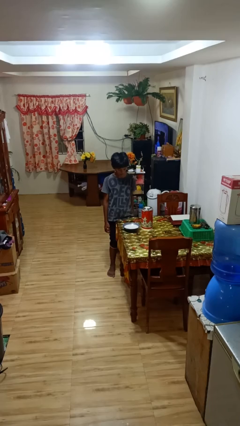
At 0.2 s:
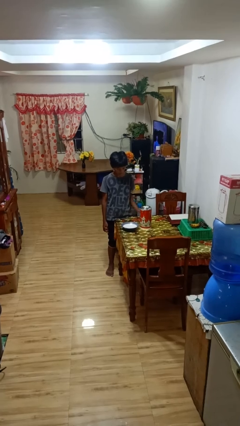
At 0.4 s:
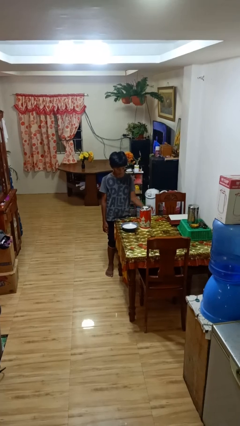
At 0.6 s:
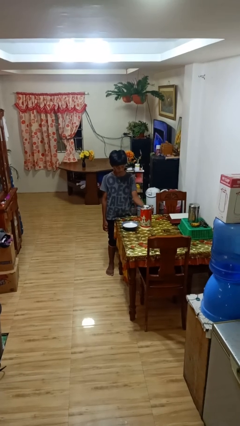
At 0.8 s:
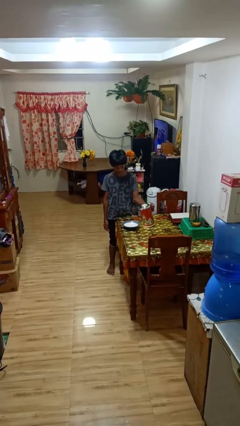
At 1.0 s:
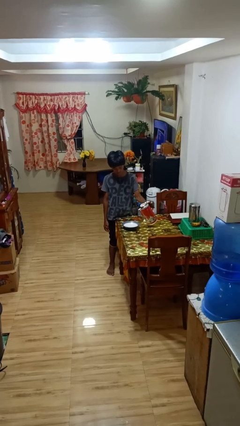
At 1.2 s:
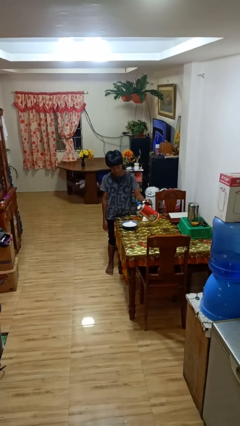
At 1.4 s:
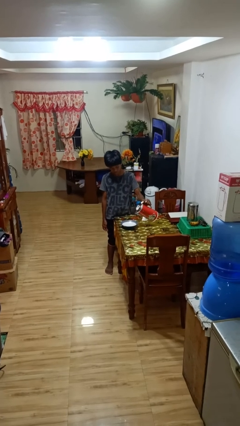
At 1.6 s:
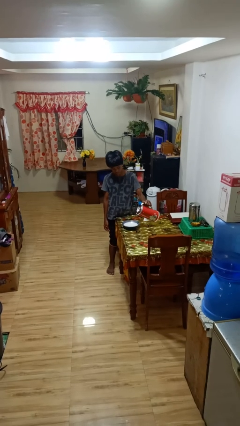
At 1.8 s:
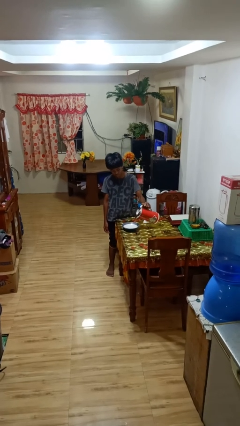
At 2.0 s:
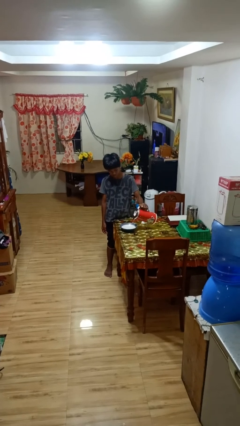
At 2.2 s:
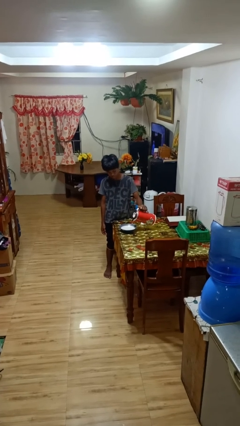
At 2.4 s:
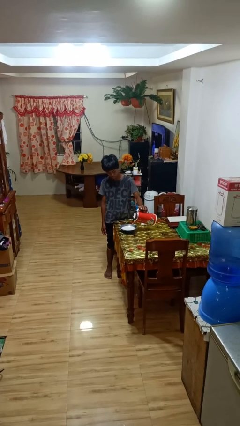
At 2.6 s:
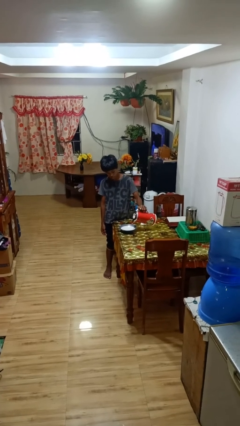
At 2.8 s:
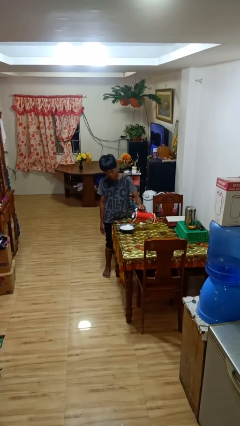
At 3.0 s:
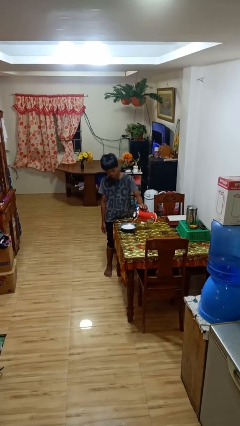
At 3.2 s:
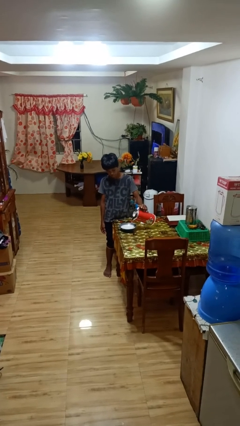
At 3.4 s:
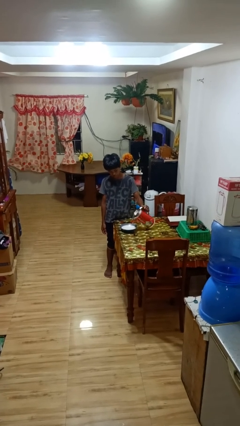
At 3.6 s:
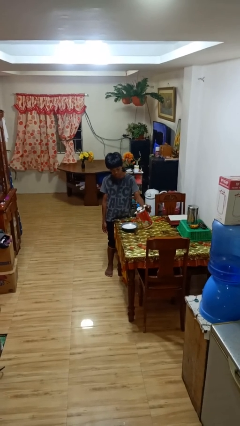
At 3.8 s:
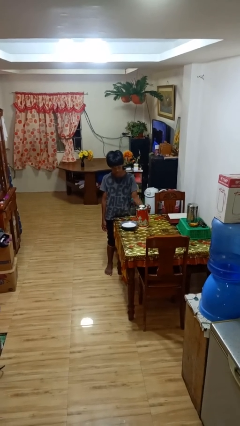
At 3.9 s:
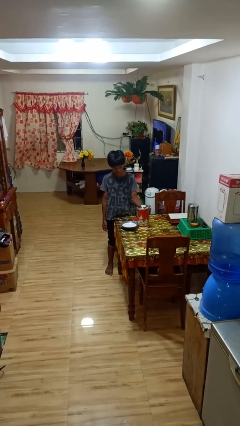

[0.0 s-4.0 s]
person pours into bowl

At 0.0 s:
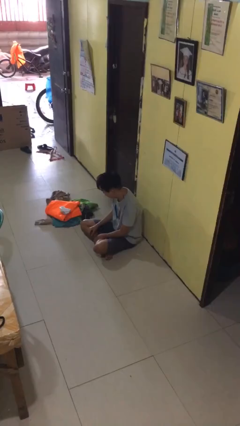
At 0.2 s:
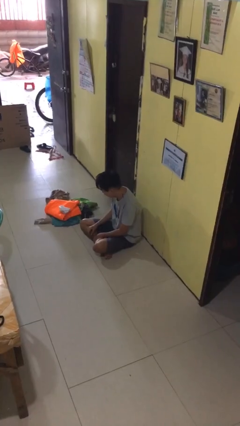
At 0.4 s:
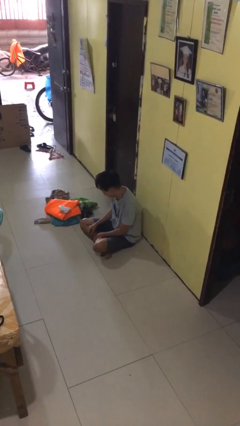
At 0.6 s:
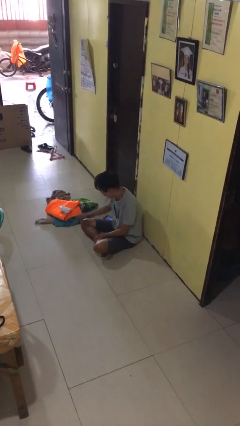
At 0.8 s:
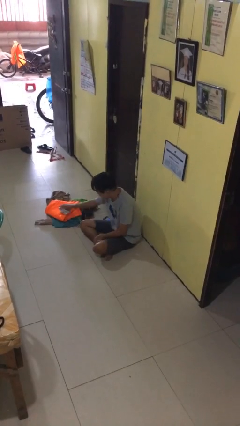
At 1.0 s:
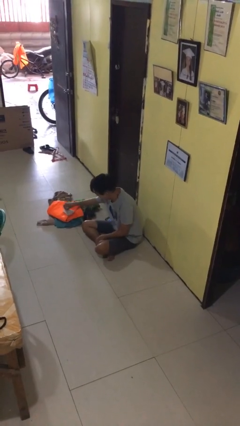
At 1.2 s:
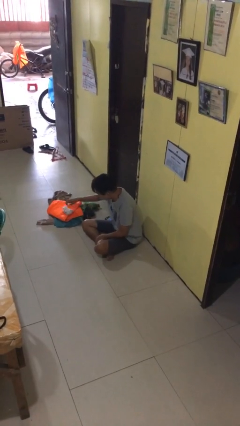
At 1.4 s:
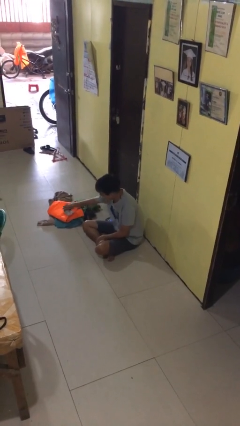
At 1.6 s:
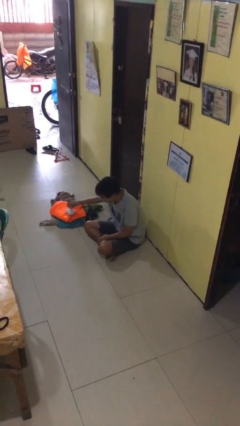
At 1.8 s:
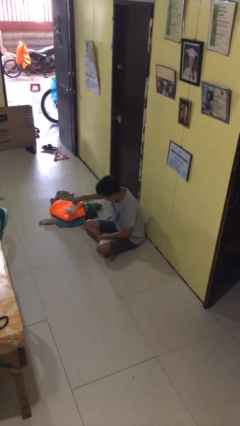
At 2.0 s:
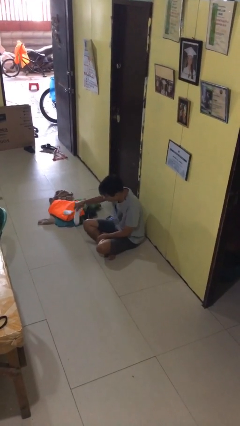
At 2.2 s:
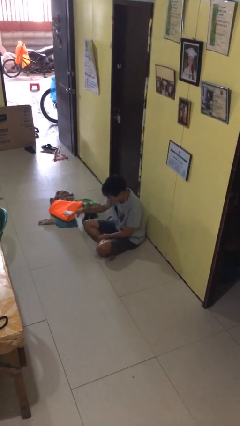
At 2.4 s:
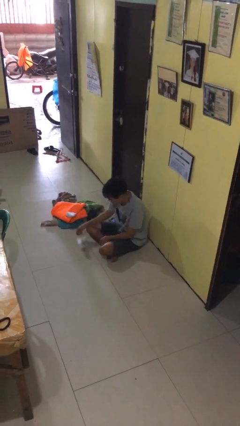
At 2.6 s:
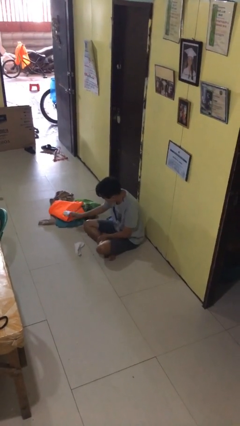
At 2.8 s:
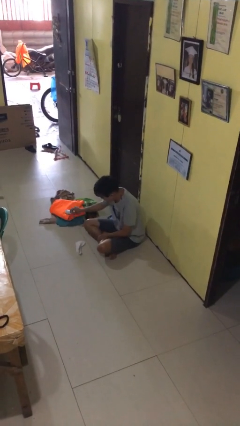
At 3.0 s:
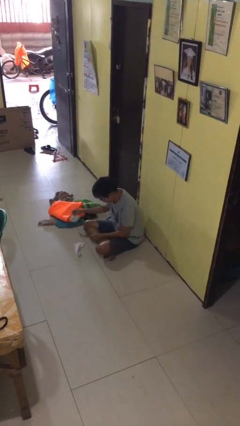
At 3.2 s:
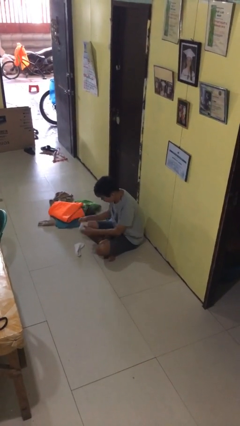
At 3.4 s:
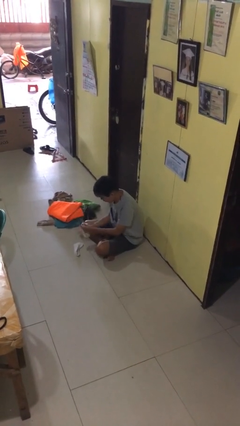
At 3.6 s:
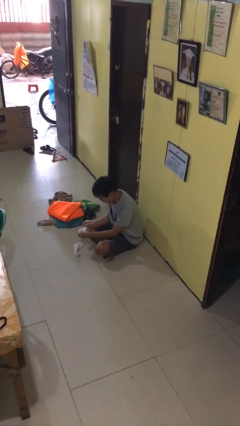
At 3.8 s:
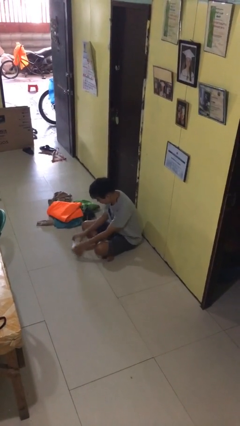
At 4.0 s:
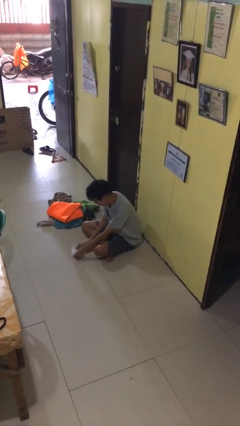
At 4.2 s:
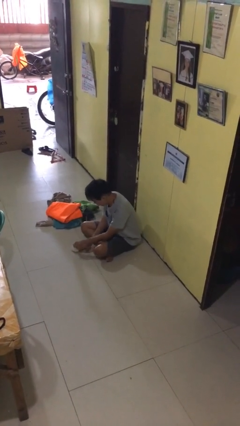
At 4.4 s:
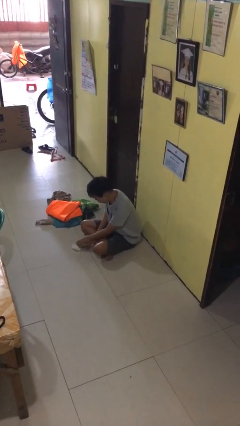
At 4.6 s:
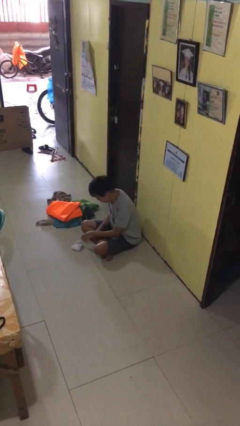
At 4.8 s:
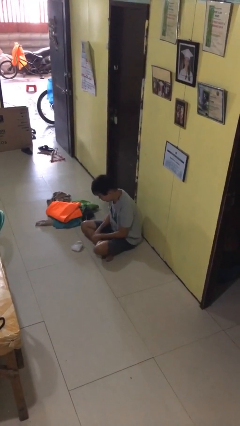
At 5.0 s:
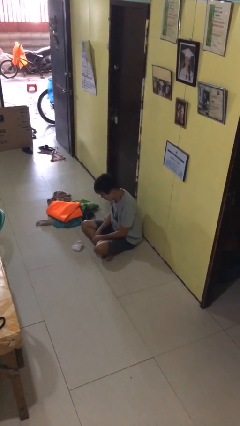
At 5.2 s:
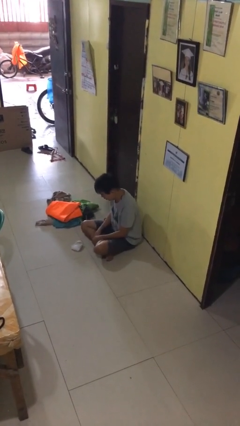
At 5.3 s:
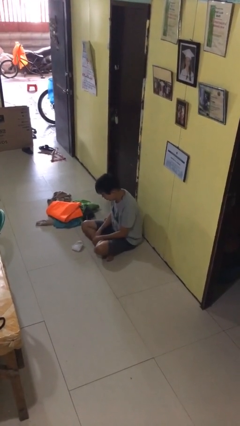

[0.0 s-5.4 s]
person folds socks

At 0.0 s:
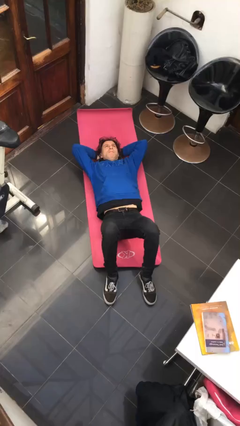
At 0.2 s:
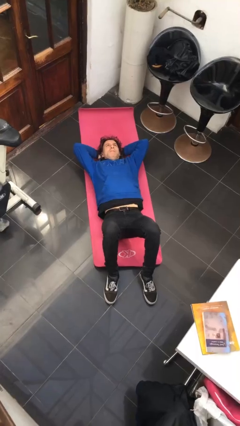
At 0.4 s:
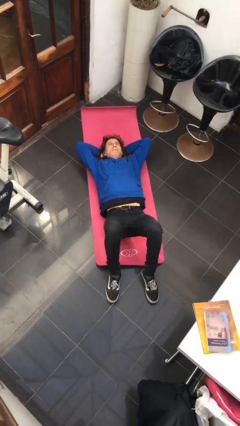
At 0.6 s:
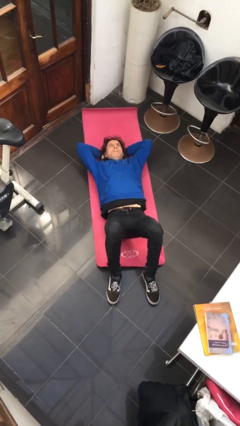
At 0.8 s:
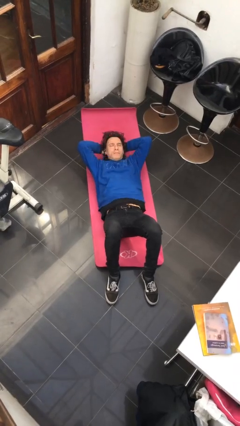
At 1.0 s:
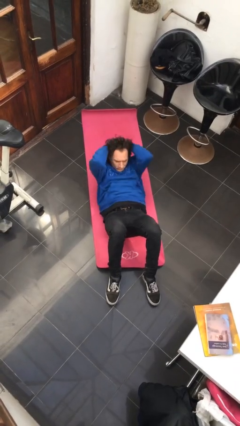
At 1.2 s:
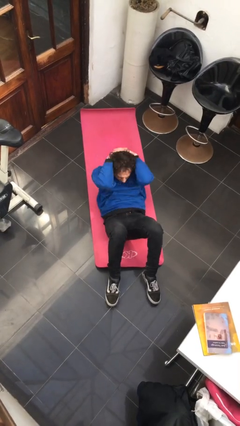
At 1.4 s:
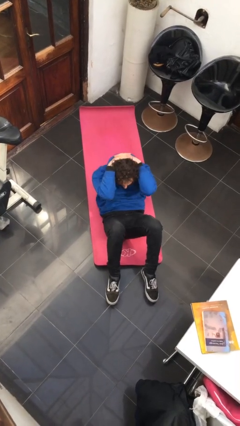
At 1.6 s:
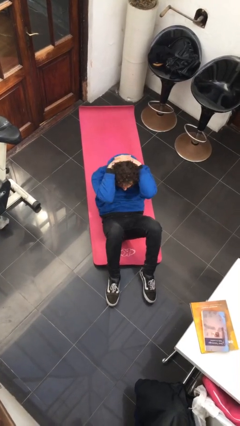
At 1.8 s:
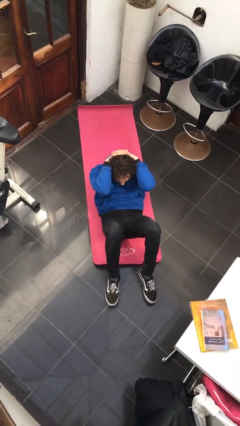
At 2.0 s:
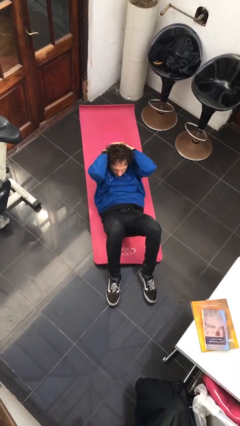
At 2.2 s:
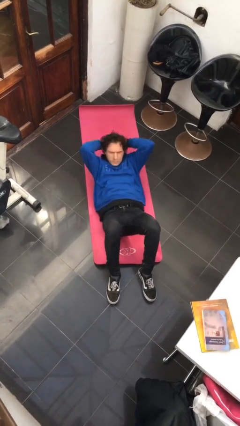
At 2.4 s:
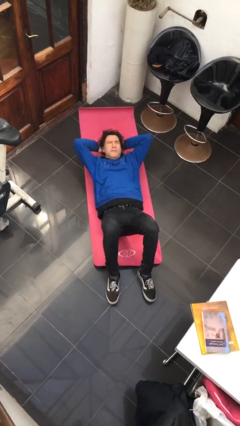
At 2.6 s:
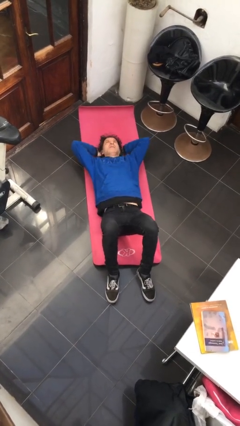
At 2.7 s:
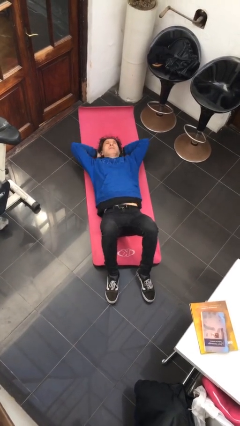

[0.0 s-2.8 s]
person exercises with situp

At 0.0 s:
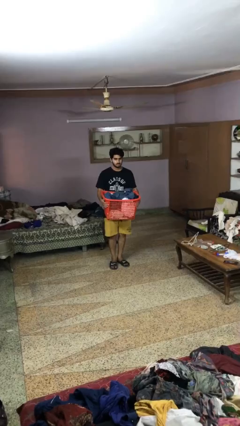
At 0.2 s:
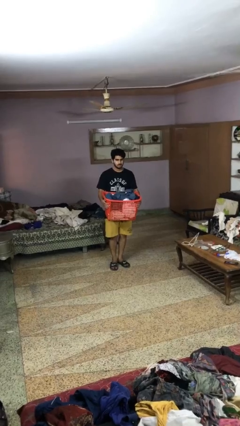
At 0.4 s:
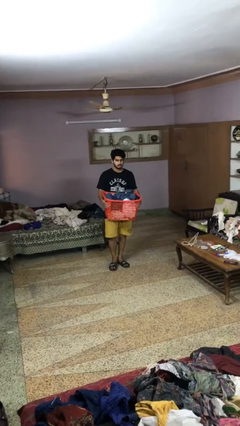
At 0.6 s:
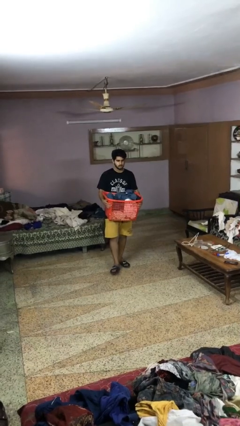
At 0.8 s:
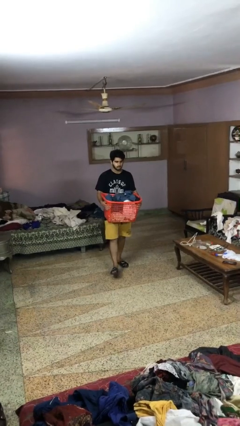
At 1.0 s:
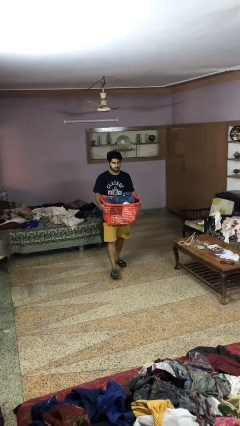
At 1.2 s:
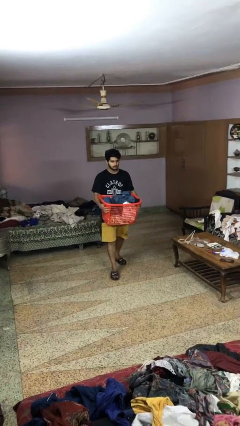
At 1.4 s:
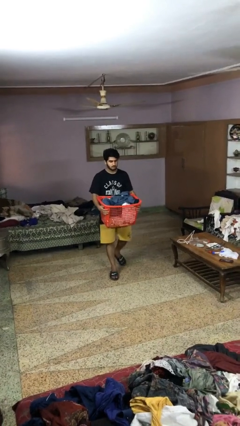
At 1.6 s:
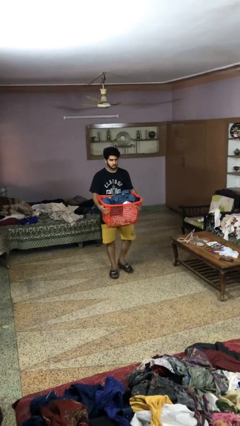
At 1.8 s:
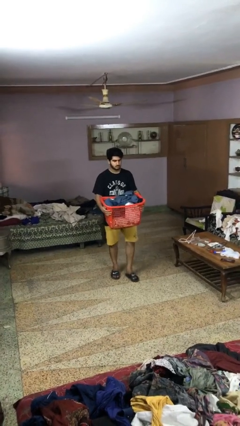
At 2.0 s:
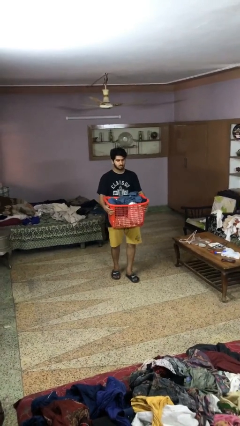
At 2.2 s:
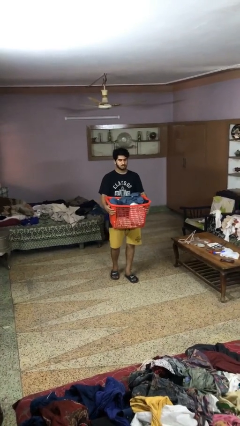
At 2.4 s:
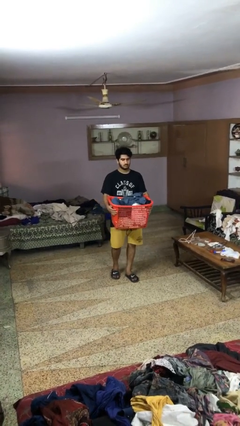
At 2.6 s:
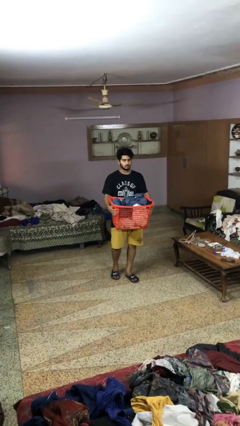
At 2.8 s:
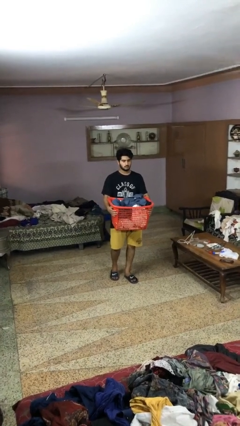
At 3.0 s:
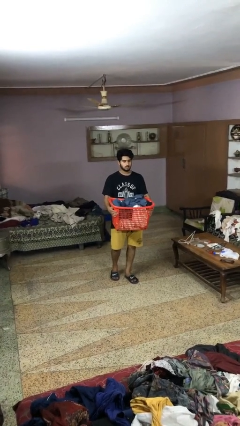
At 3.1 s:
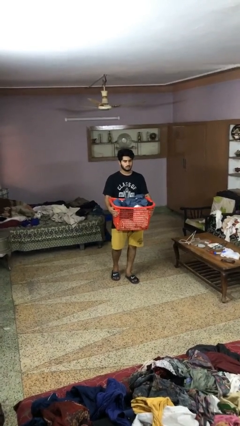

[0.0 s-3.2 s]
person carries laundry basket

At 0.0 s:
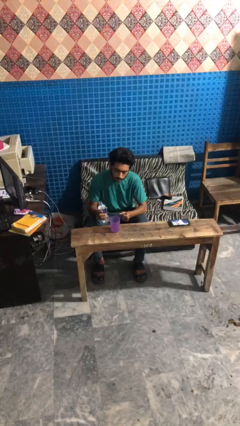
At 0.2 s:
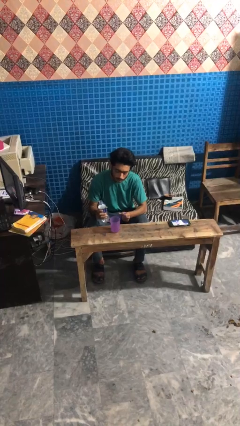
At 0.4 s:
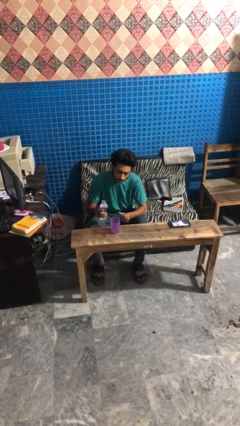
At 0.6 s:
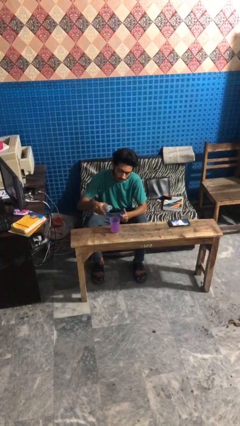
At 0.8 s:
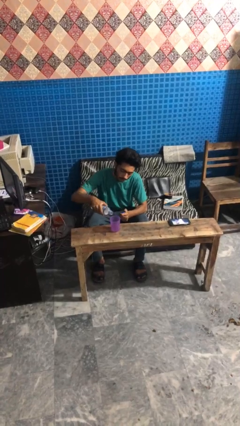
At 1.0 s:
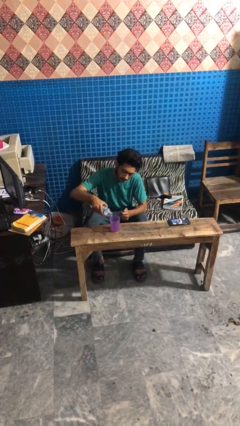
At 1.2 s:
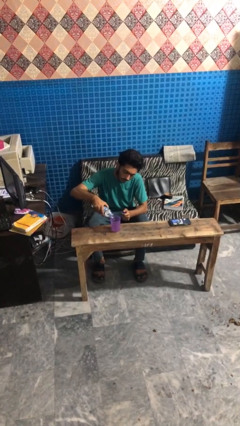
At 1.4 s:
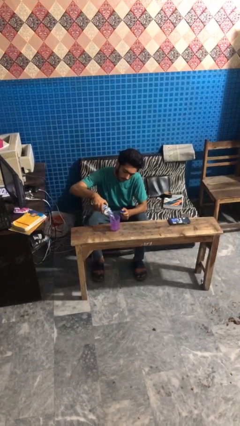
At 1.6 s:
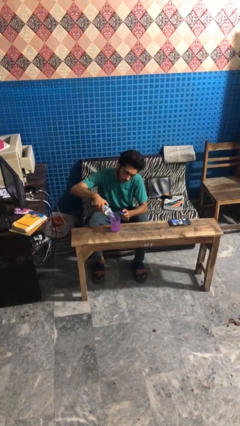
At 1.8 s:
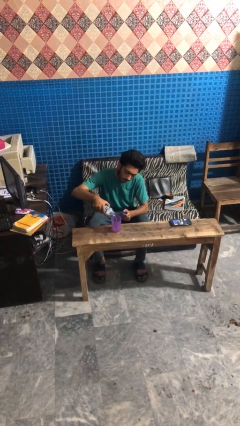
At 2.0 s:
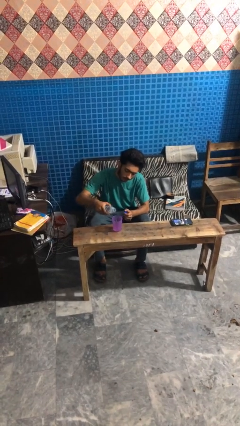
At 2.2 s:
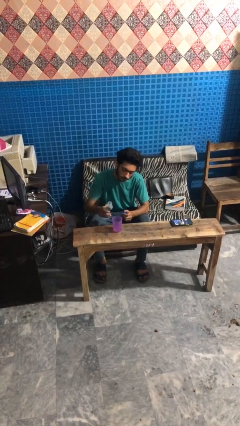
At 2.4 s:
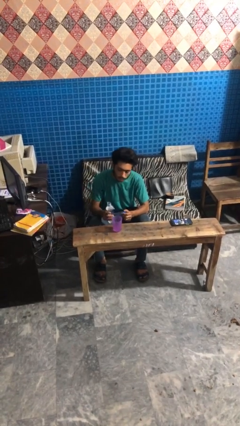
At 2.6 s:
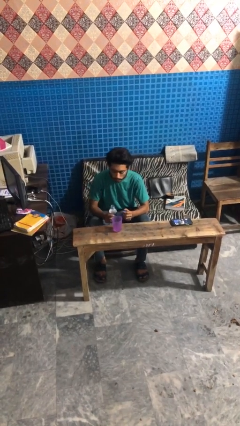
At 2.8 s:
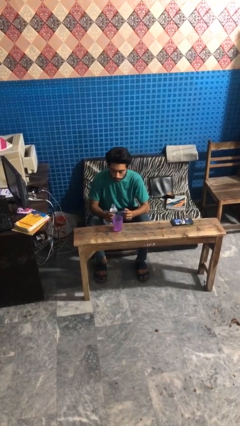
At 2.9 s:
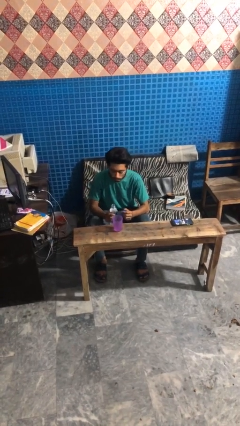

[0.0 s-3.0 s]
person pours liquid into cup
